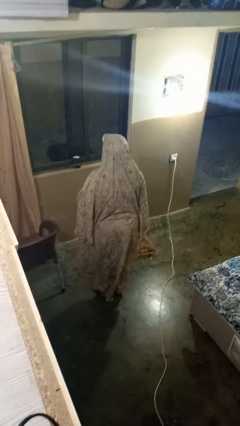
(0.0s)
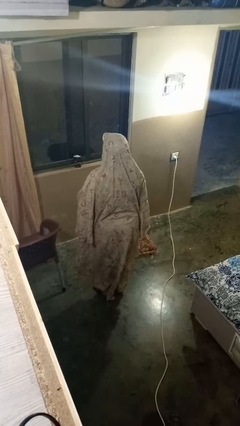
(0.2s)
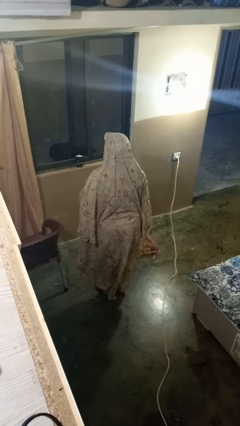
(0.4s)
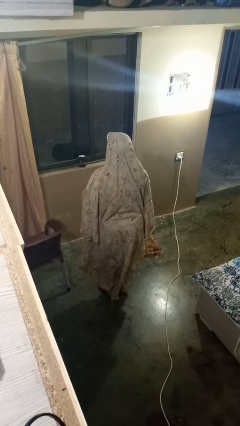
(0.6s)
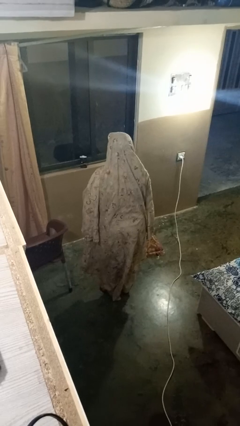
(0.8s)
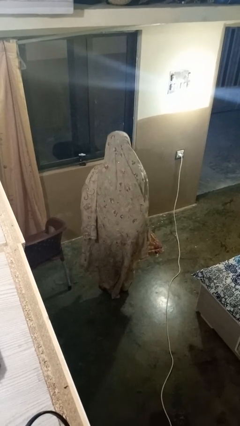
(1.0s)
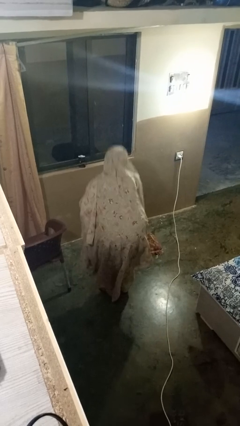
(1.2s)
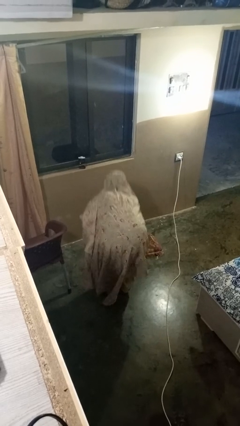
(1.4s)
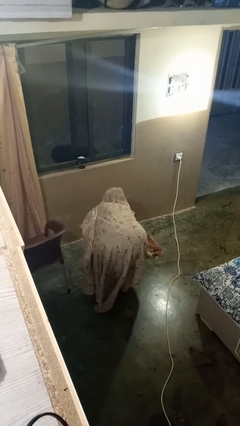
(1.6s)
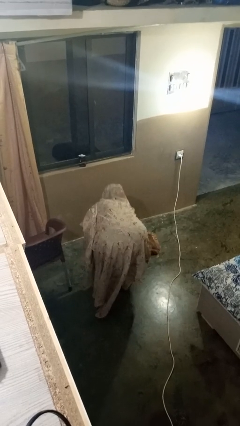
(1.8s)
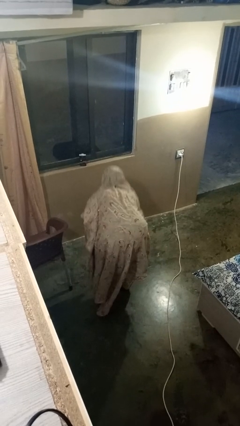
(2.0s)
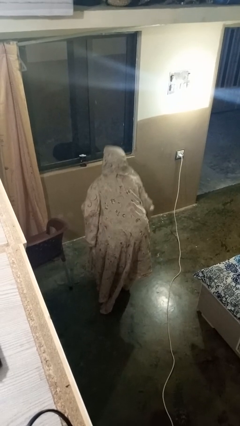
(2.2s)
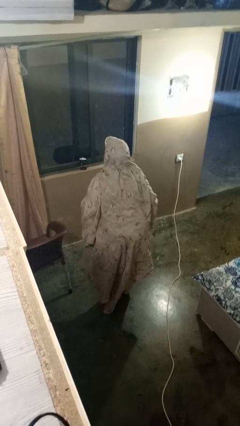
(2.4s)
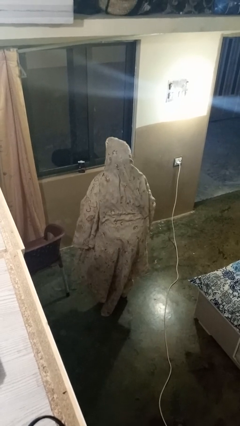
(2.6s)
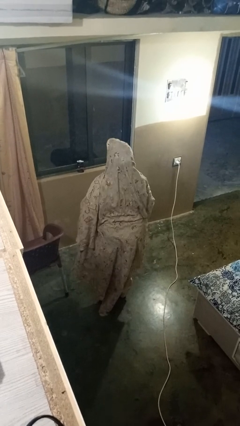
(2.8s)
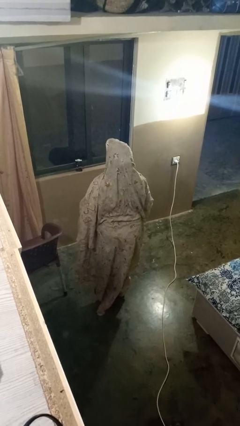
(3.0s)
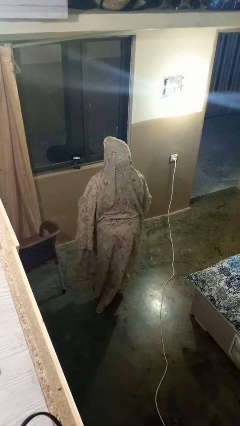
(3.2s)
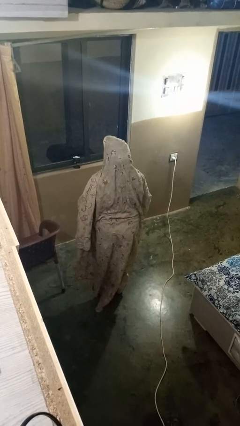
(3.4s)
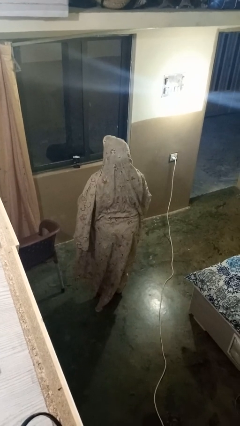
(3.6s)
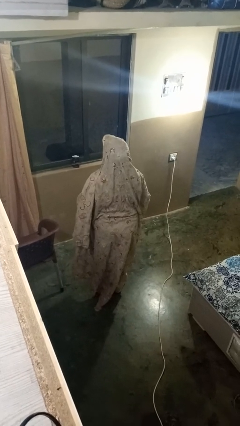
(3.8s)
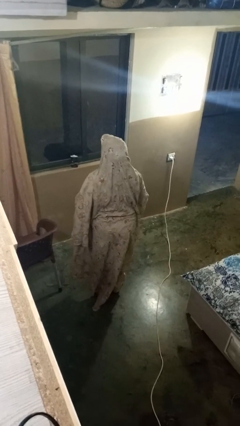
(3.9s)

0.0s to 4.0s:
person picks up object from floor

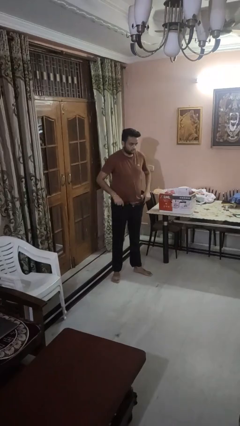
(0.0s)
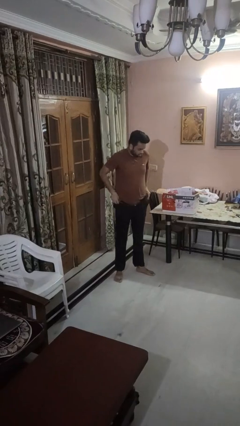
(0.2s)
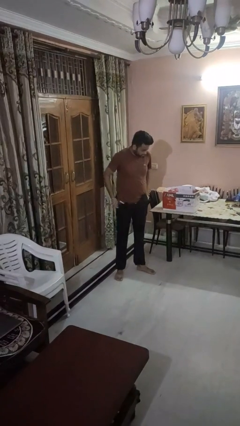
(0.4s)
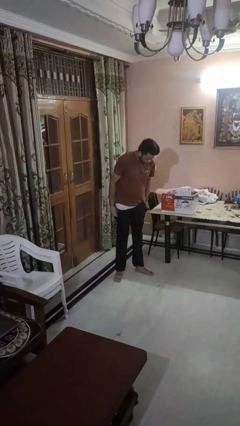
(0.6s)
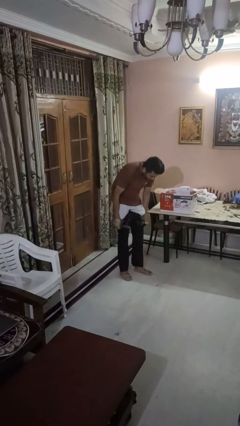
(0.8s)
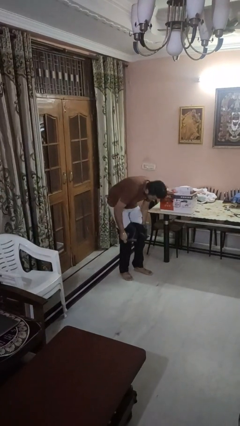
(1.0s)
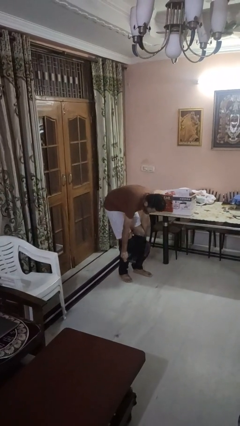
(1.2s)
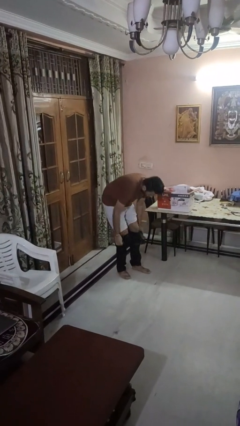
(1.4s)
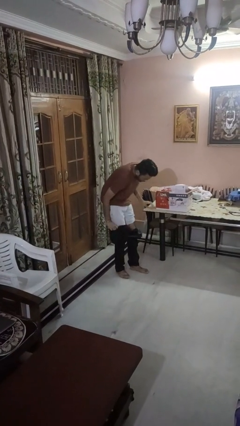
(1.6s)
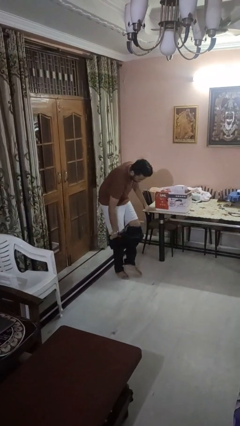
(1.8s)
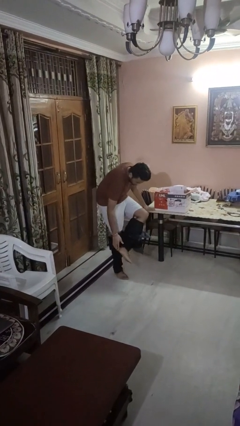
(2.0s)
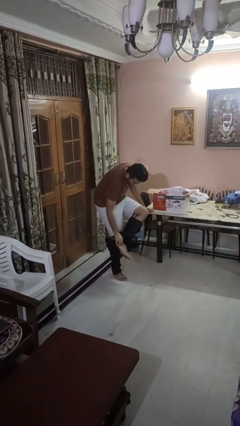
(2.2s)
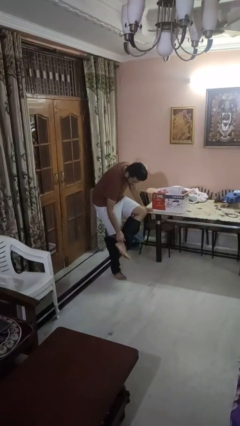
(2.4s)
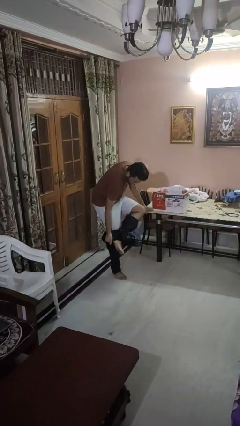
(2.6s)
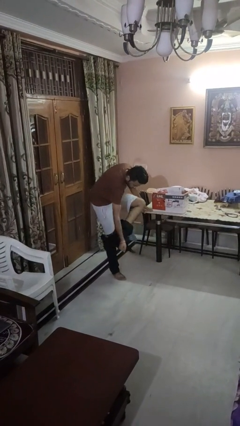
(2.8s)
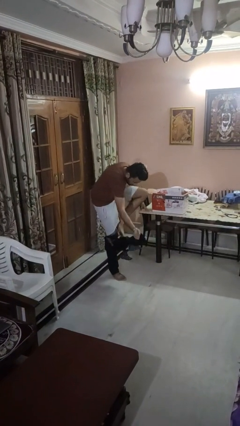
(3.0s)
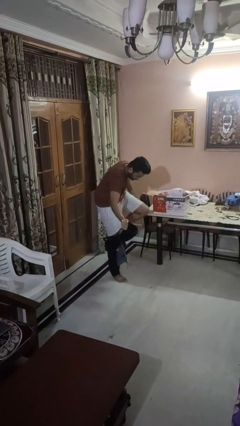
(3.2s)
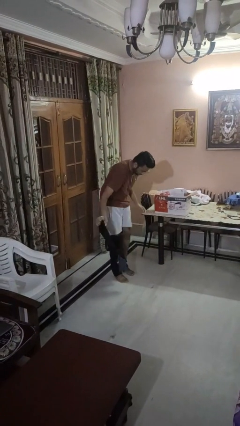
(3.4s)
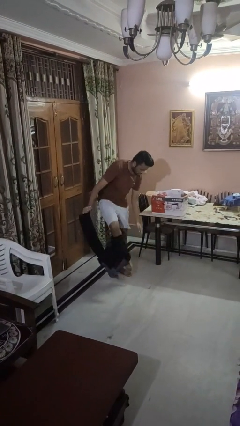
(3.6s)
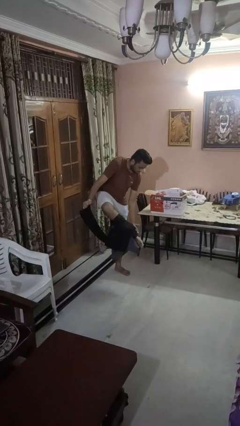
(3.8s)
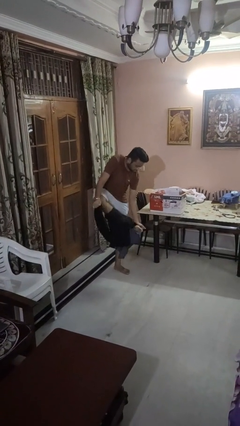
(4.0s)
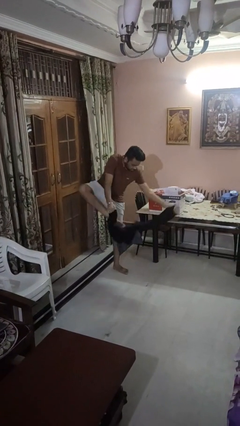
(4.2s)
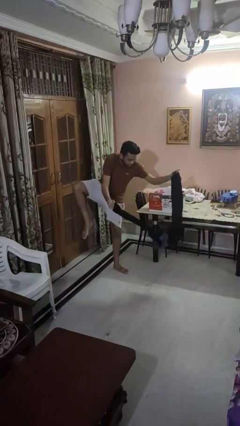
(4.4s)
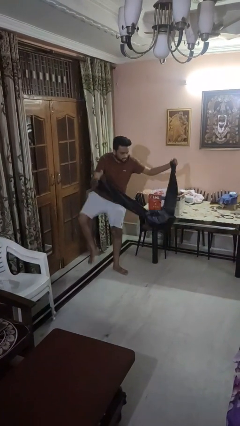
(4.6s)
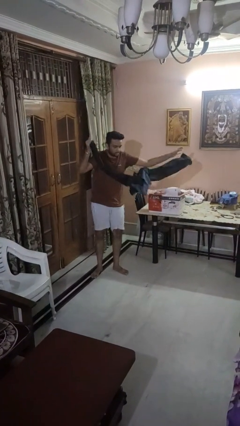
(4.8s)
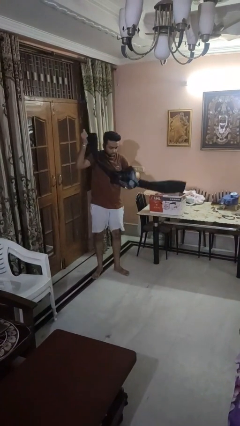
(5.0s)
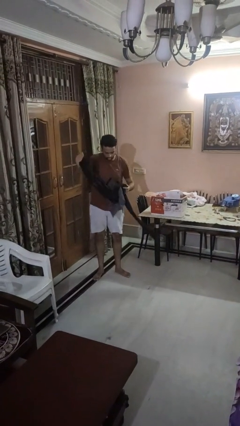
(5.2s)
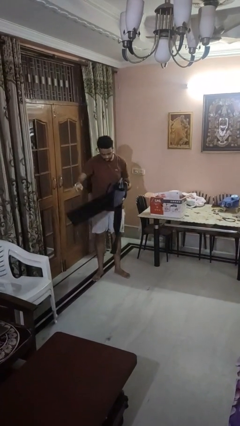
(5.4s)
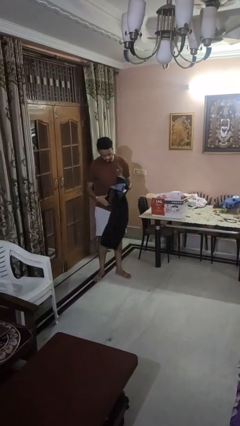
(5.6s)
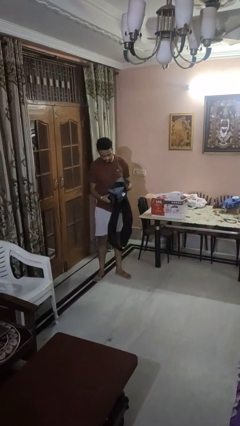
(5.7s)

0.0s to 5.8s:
person takes off pants

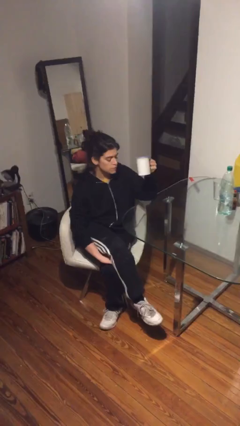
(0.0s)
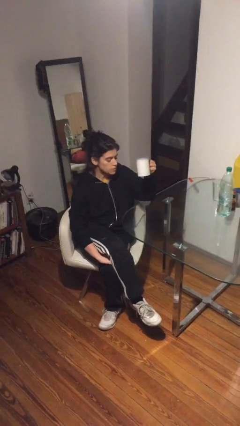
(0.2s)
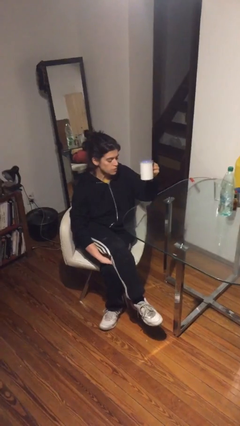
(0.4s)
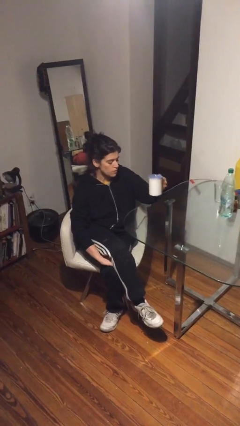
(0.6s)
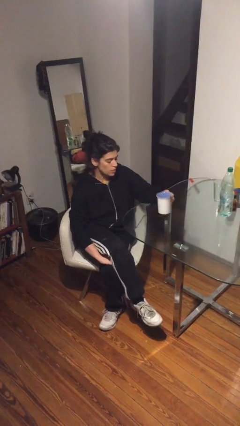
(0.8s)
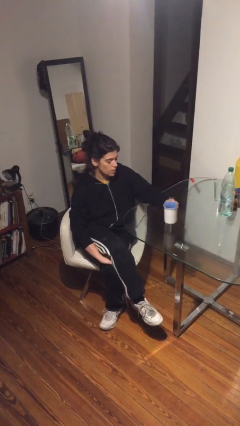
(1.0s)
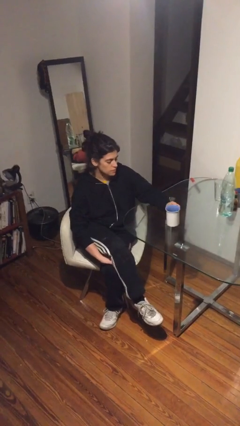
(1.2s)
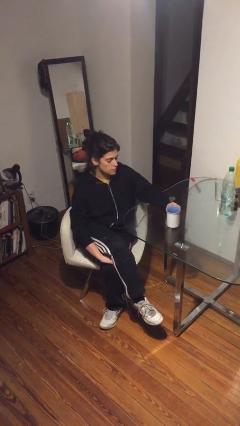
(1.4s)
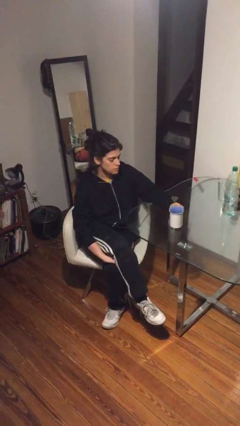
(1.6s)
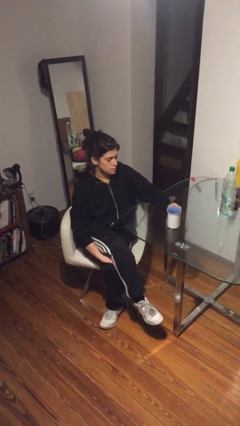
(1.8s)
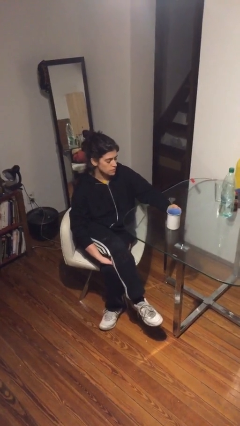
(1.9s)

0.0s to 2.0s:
person puts down object on table

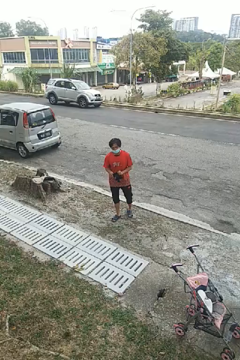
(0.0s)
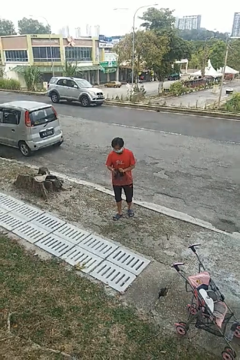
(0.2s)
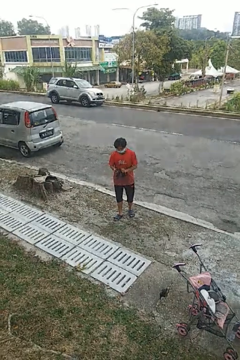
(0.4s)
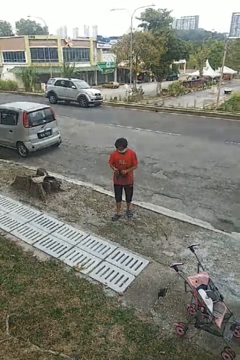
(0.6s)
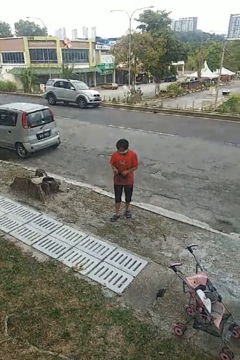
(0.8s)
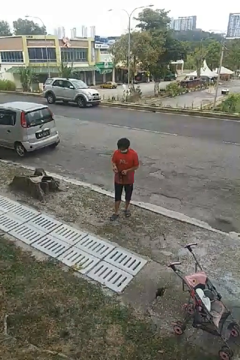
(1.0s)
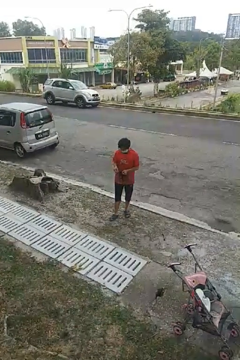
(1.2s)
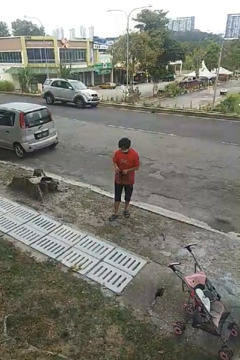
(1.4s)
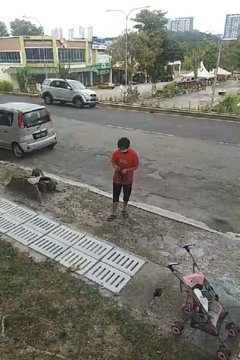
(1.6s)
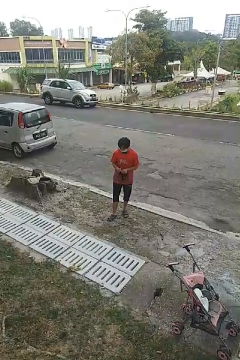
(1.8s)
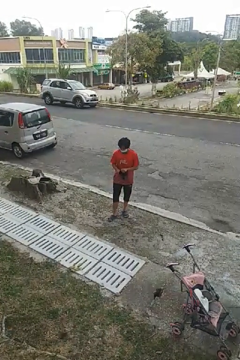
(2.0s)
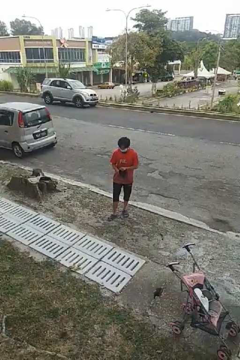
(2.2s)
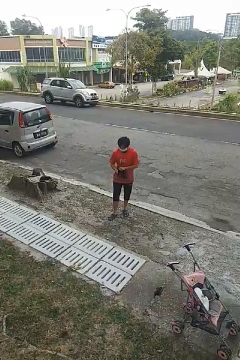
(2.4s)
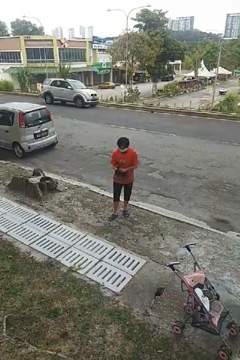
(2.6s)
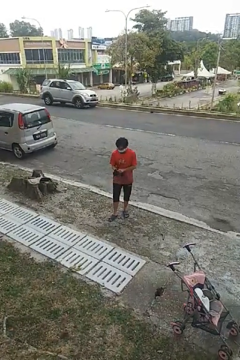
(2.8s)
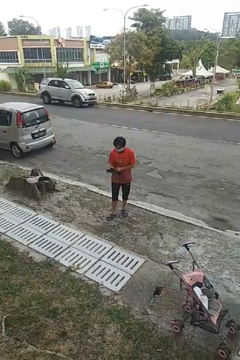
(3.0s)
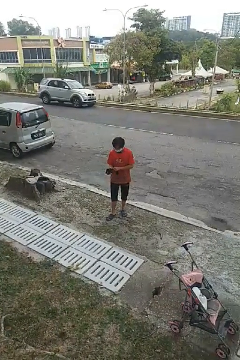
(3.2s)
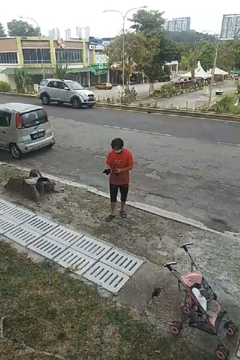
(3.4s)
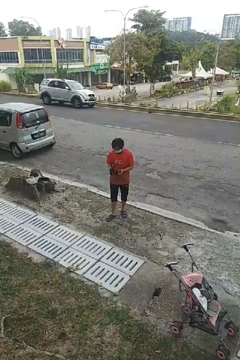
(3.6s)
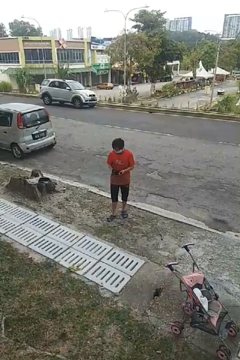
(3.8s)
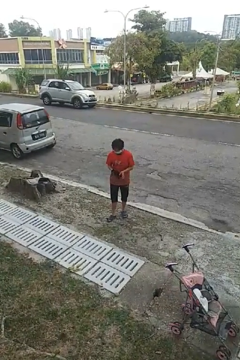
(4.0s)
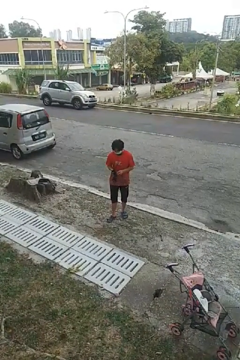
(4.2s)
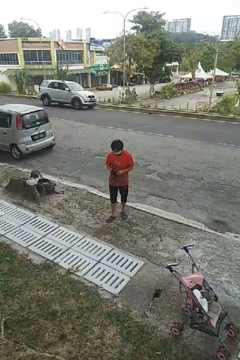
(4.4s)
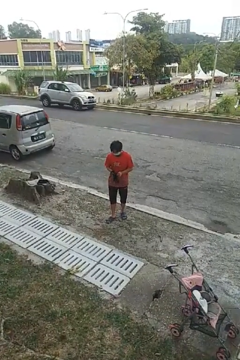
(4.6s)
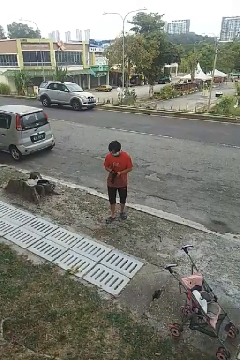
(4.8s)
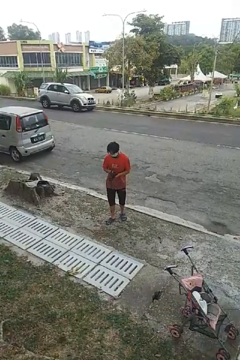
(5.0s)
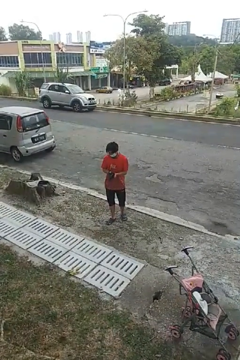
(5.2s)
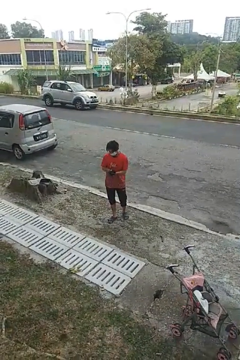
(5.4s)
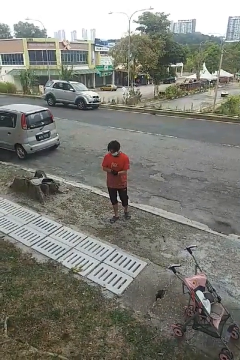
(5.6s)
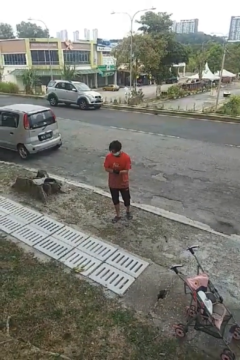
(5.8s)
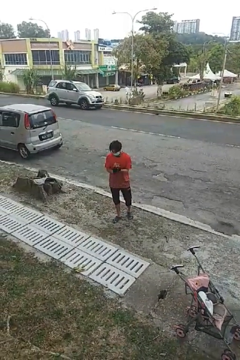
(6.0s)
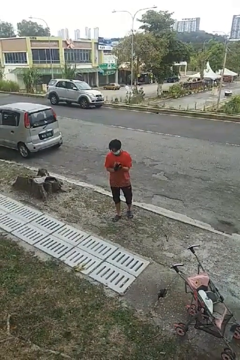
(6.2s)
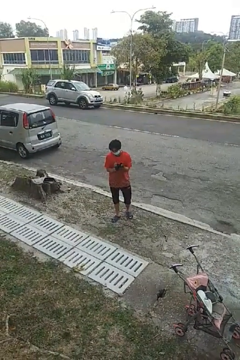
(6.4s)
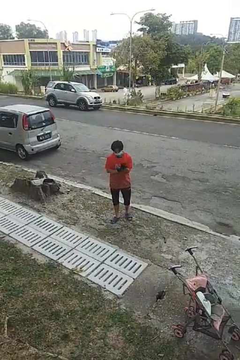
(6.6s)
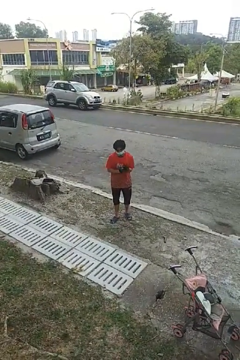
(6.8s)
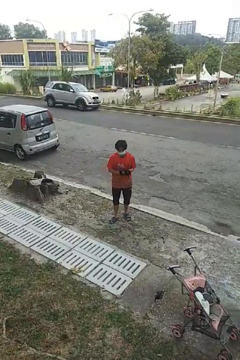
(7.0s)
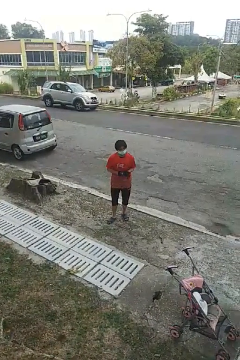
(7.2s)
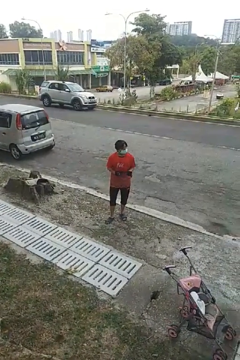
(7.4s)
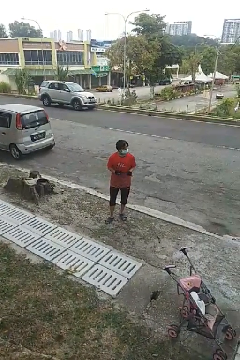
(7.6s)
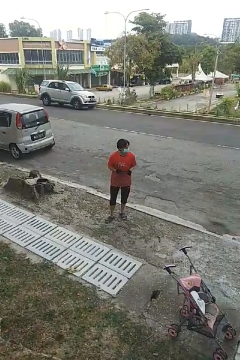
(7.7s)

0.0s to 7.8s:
person puts on gloves
